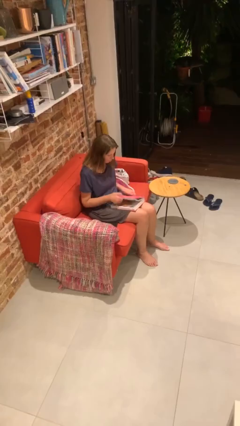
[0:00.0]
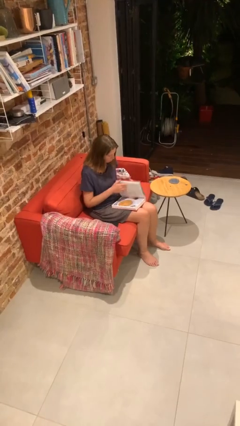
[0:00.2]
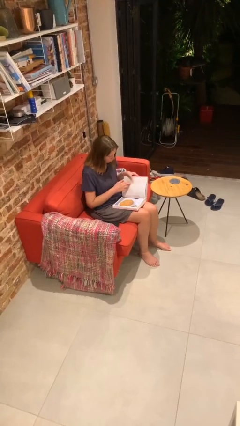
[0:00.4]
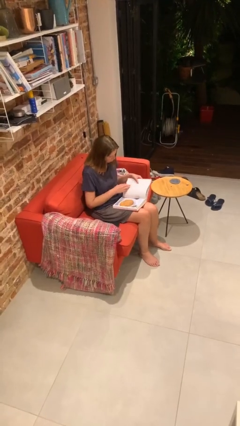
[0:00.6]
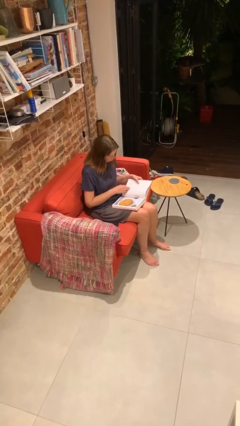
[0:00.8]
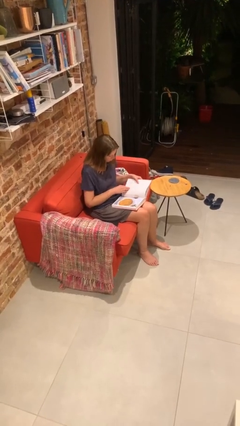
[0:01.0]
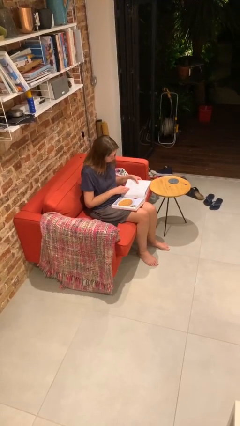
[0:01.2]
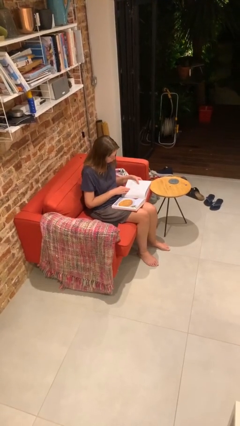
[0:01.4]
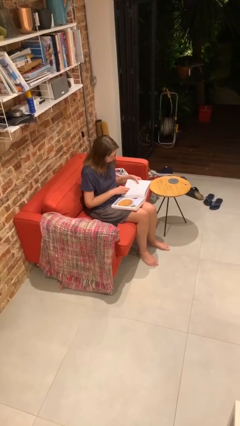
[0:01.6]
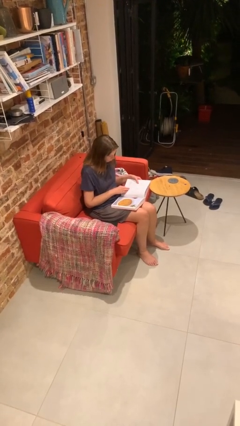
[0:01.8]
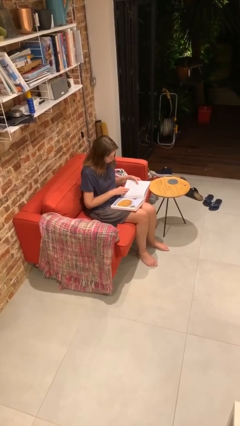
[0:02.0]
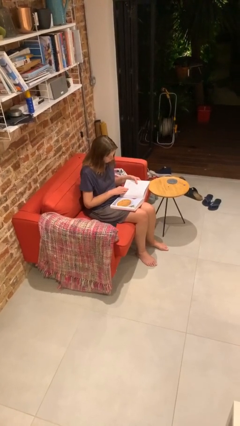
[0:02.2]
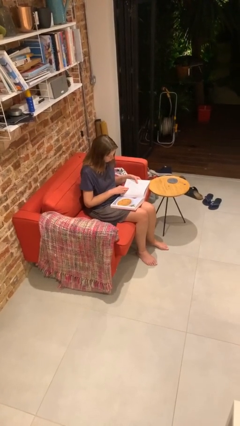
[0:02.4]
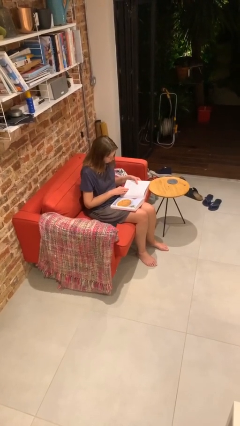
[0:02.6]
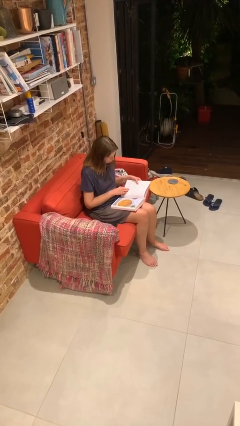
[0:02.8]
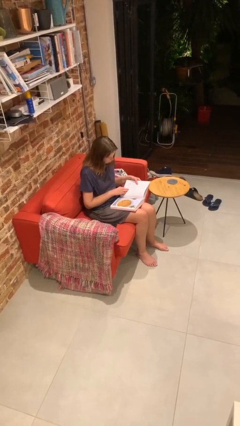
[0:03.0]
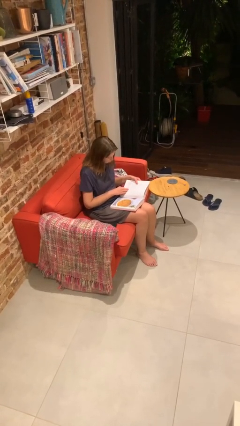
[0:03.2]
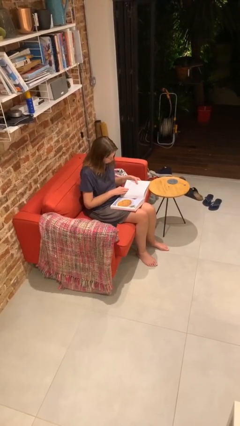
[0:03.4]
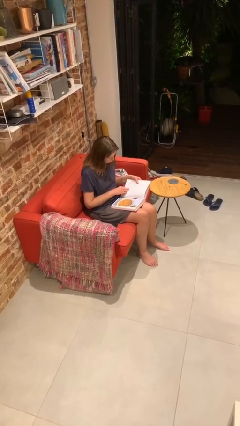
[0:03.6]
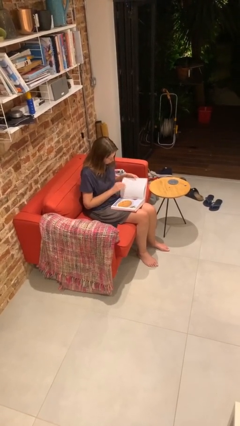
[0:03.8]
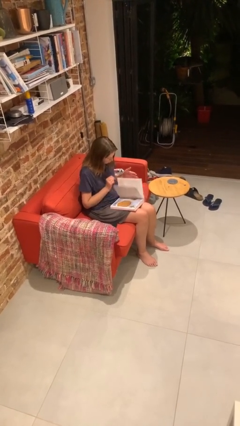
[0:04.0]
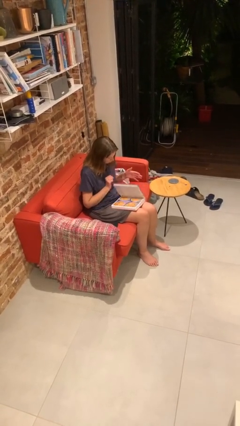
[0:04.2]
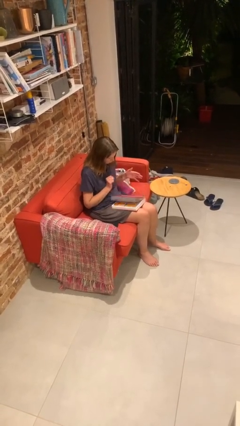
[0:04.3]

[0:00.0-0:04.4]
person reads document

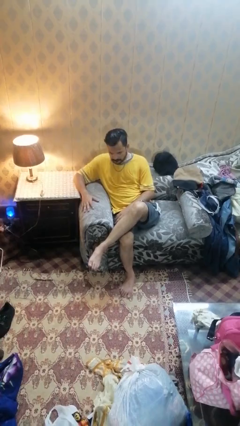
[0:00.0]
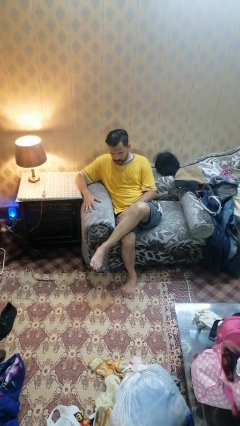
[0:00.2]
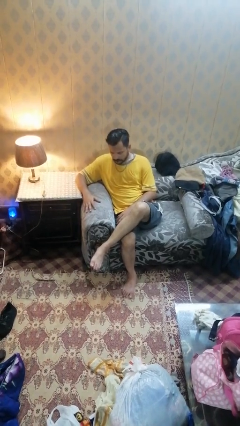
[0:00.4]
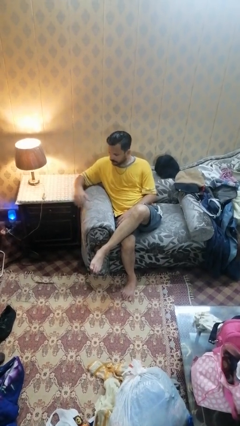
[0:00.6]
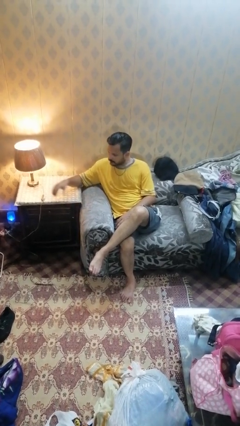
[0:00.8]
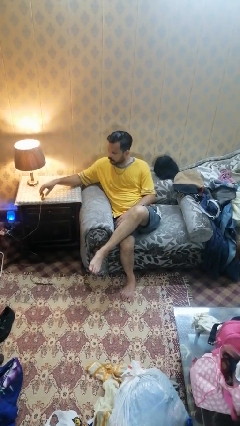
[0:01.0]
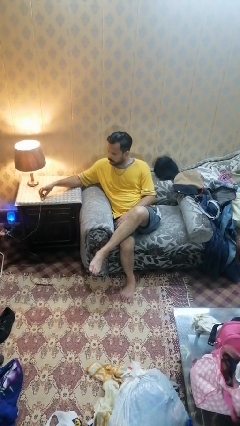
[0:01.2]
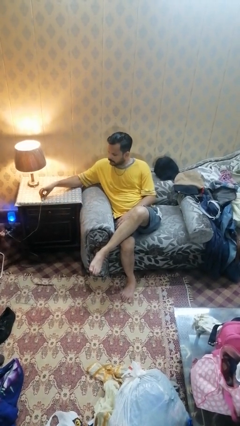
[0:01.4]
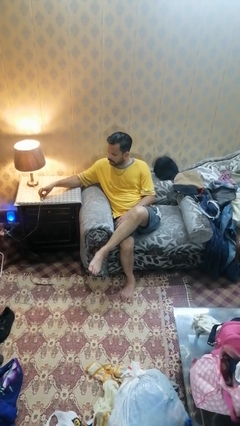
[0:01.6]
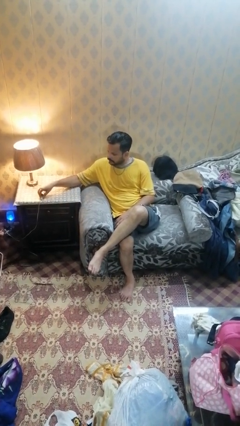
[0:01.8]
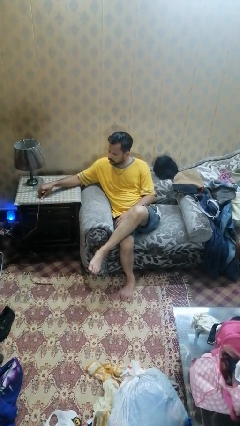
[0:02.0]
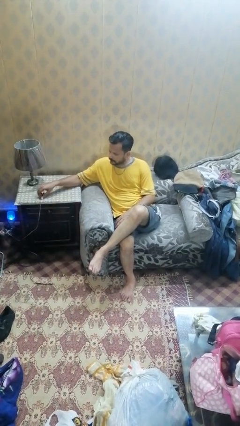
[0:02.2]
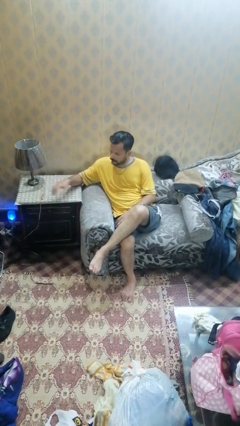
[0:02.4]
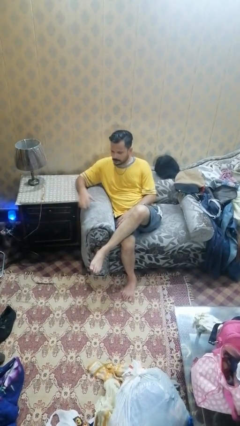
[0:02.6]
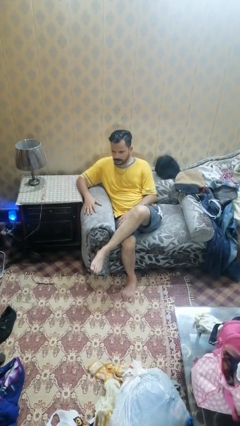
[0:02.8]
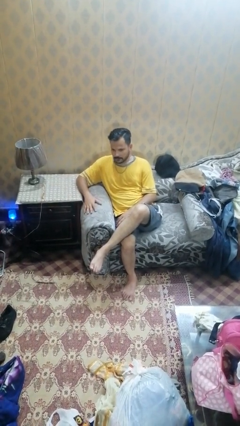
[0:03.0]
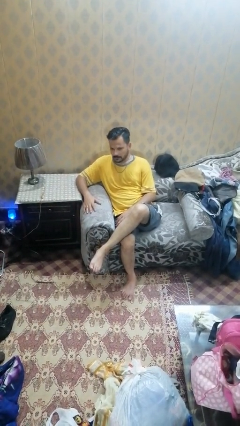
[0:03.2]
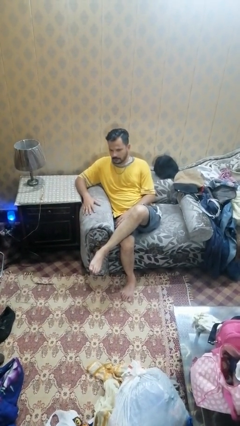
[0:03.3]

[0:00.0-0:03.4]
person turns off lamp

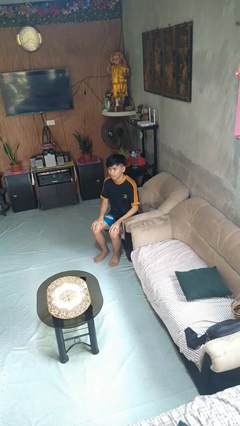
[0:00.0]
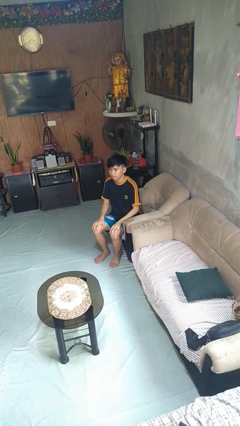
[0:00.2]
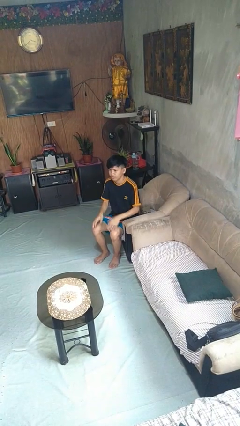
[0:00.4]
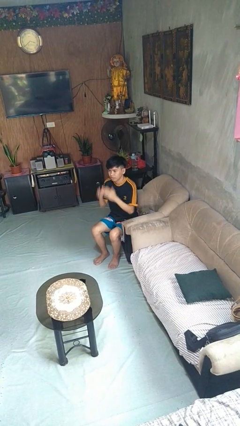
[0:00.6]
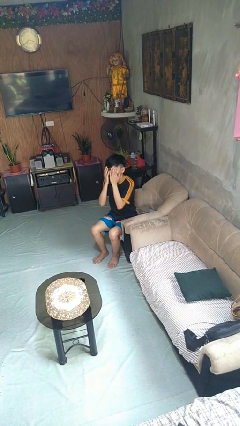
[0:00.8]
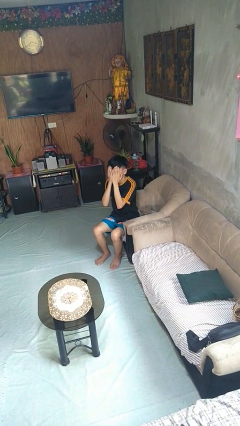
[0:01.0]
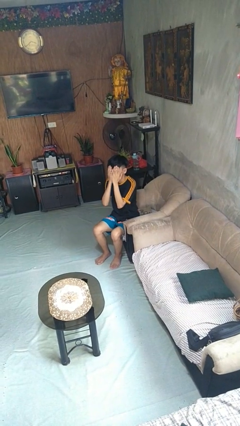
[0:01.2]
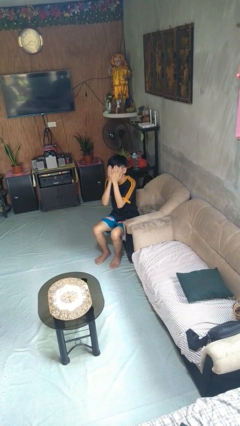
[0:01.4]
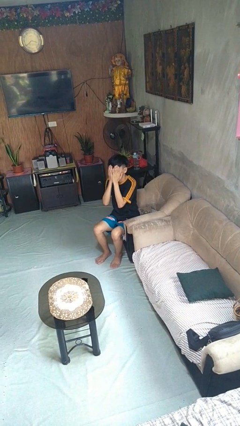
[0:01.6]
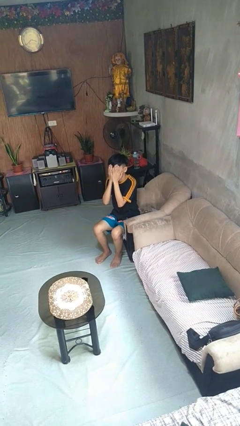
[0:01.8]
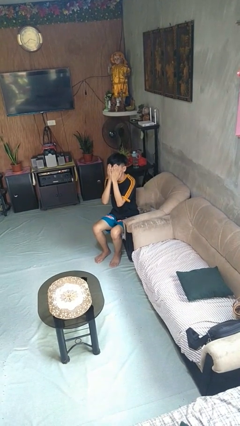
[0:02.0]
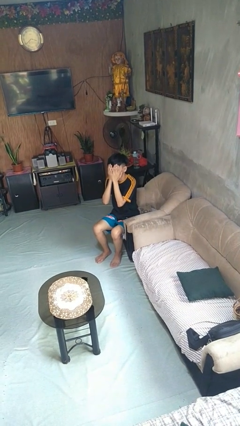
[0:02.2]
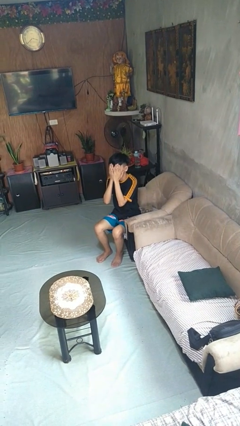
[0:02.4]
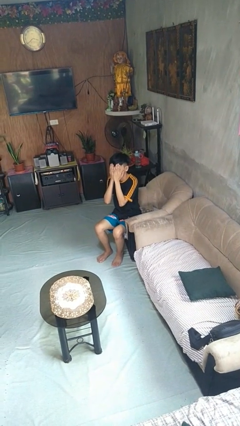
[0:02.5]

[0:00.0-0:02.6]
person covers face with hands

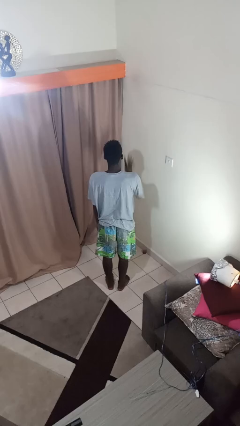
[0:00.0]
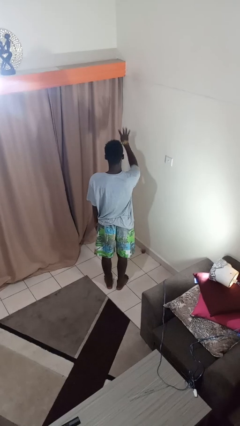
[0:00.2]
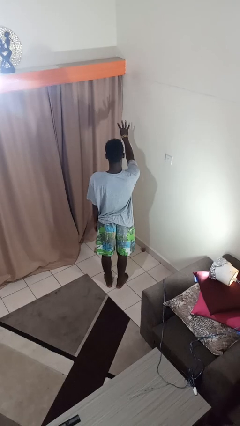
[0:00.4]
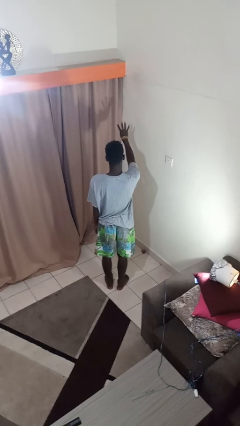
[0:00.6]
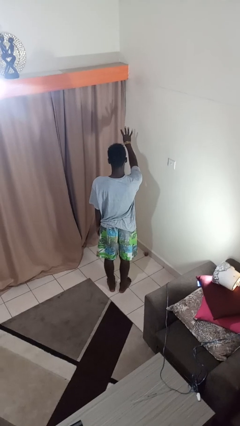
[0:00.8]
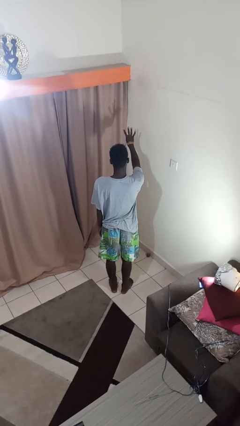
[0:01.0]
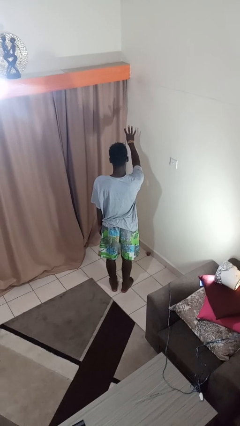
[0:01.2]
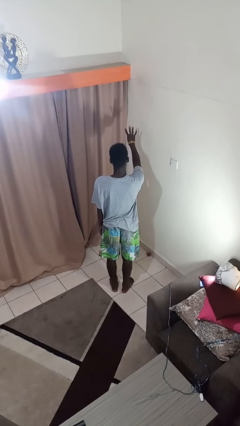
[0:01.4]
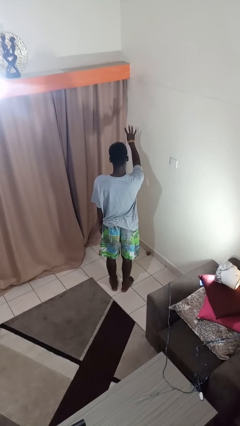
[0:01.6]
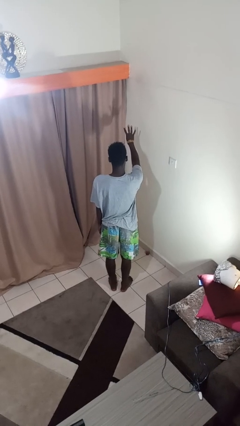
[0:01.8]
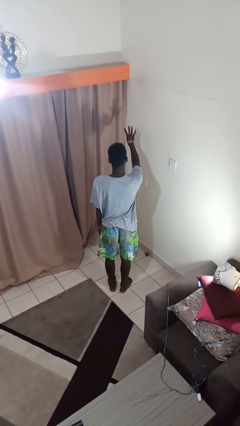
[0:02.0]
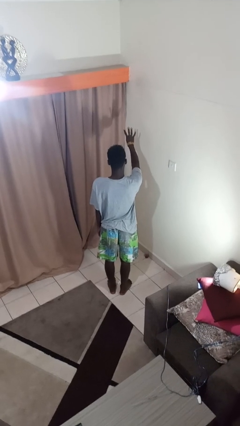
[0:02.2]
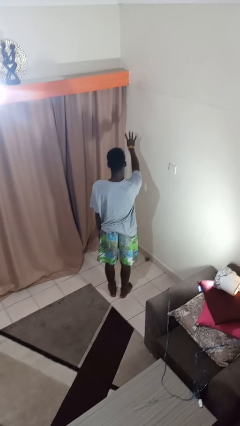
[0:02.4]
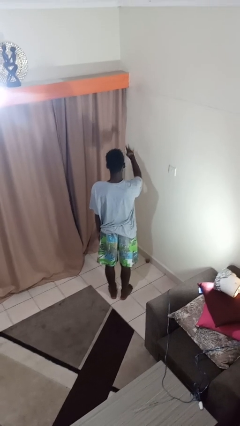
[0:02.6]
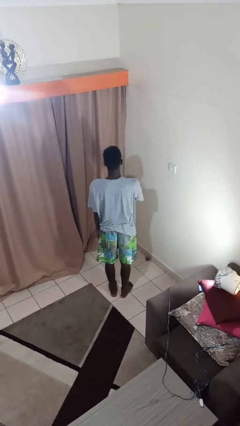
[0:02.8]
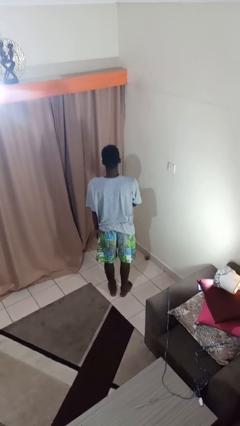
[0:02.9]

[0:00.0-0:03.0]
person gestures number four

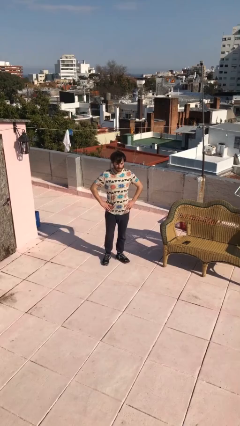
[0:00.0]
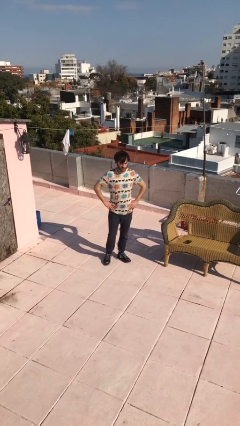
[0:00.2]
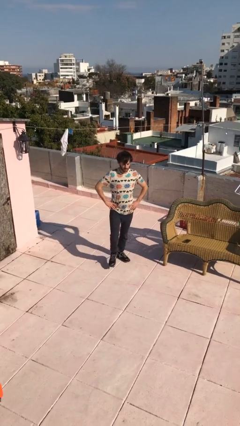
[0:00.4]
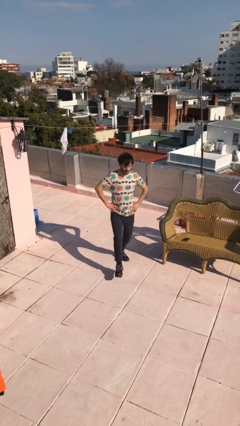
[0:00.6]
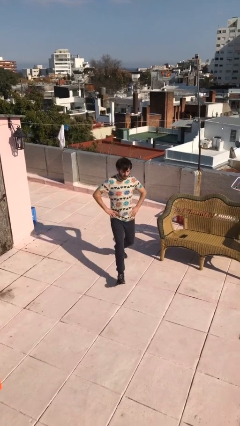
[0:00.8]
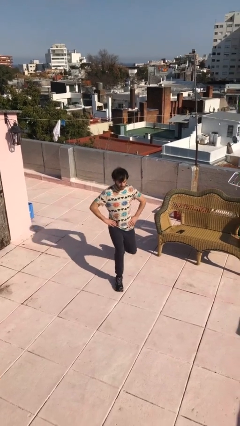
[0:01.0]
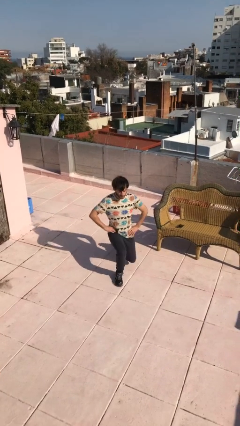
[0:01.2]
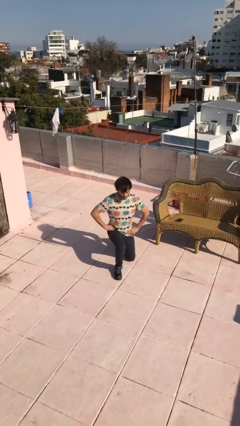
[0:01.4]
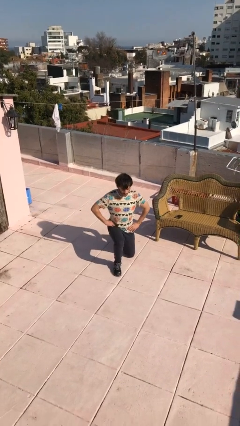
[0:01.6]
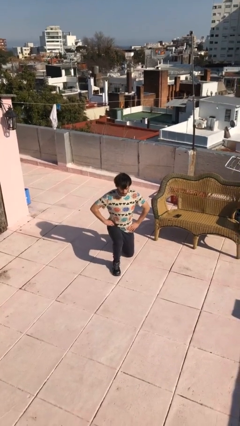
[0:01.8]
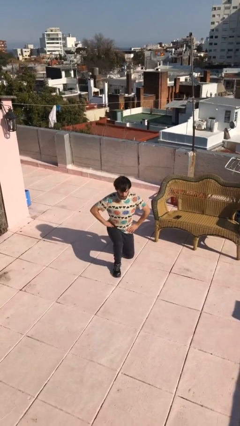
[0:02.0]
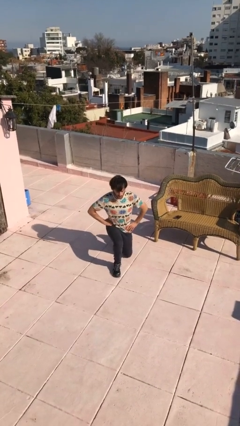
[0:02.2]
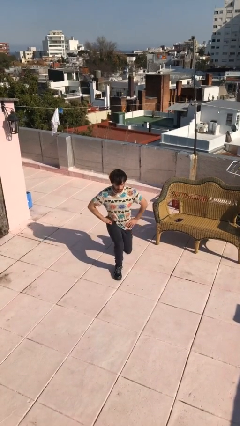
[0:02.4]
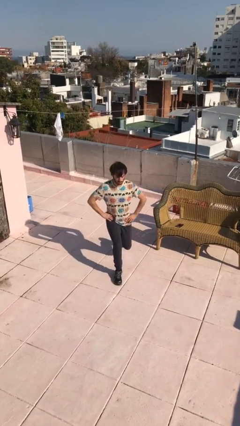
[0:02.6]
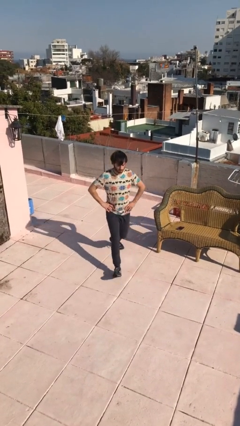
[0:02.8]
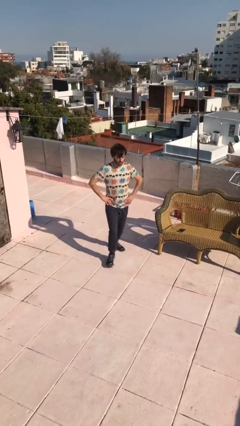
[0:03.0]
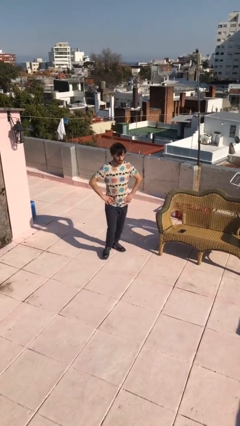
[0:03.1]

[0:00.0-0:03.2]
person exercises with lunges

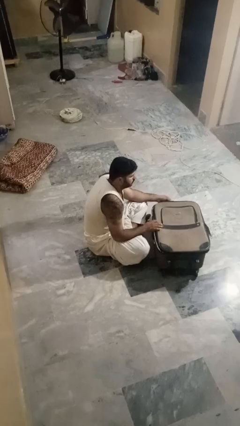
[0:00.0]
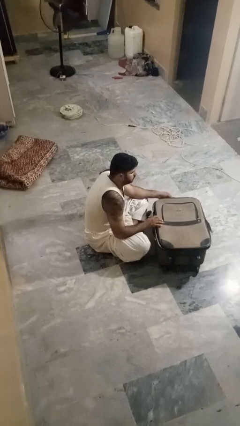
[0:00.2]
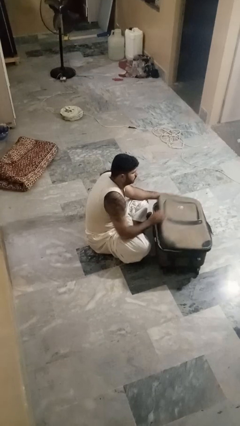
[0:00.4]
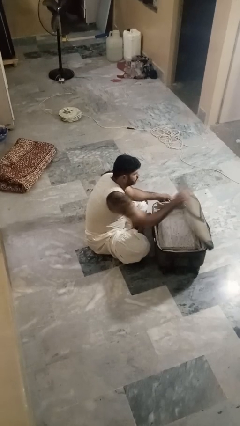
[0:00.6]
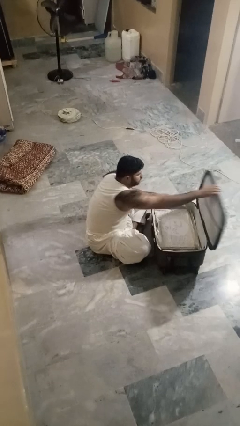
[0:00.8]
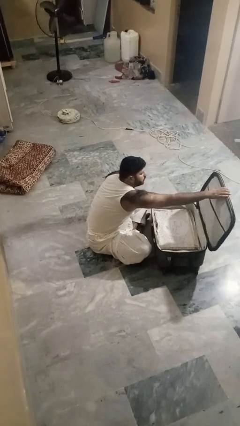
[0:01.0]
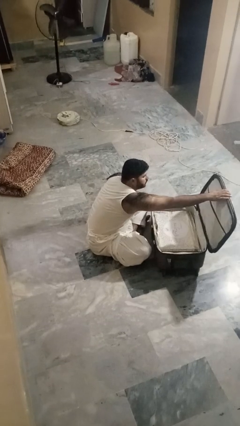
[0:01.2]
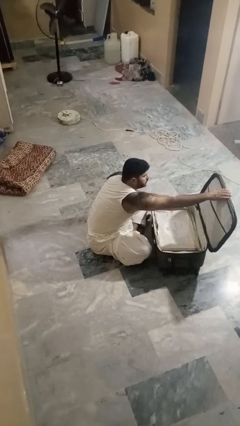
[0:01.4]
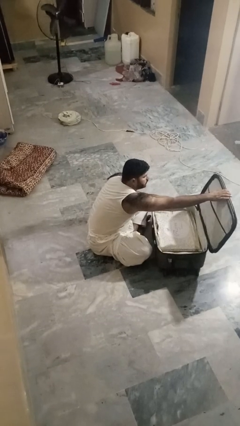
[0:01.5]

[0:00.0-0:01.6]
person opens suitcase
